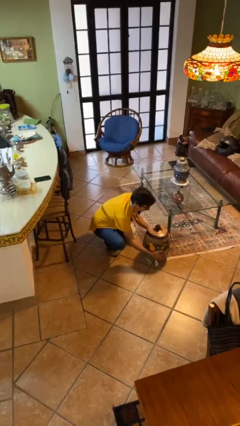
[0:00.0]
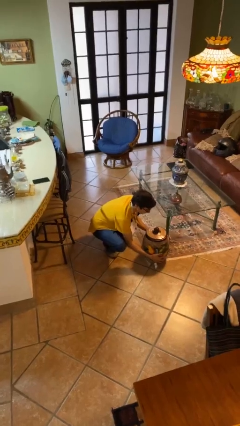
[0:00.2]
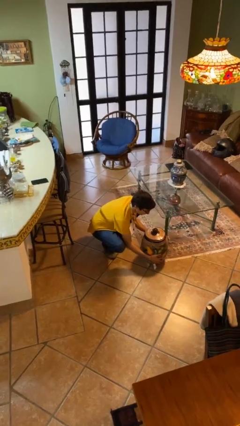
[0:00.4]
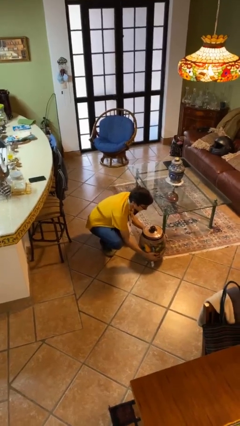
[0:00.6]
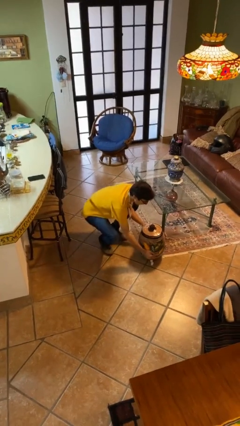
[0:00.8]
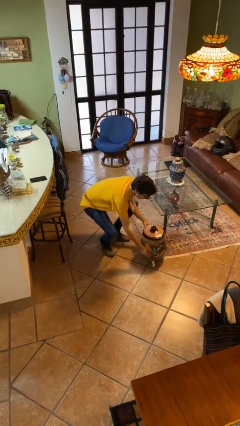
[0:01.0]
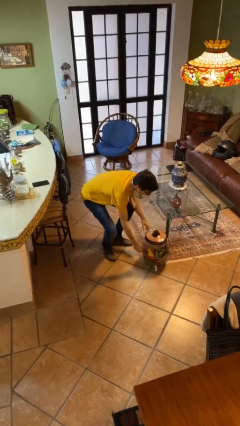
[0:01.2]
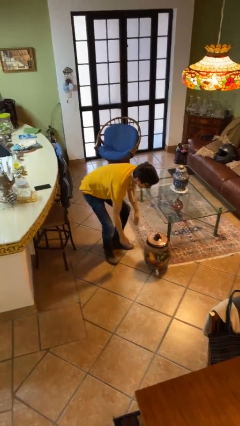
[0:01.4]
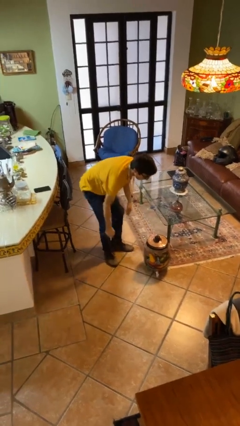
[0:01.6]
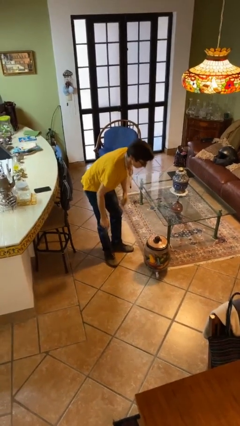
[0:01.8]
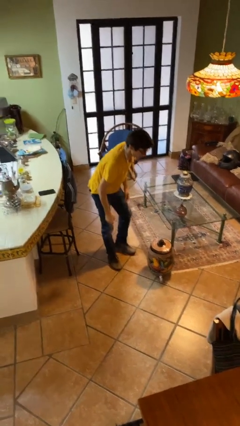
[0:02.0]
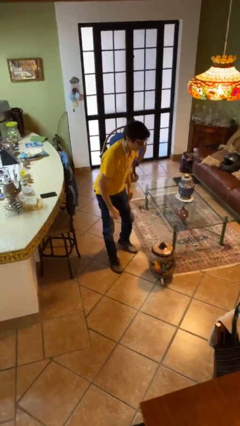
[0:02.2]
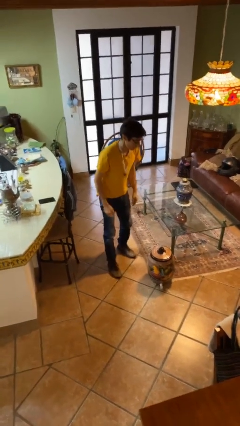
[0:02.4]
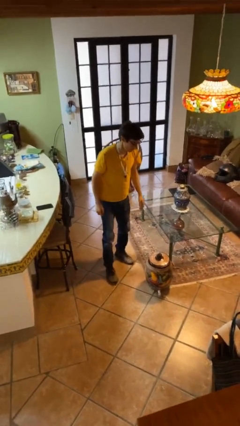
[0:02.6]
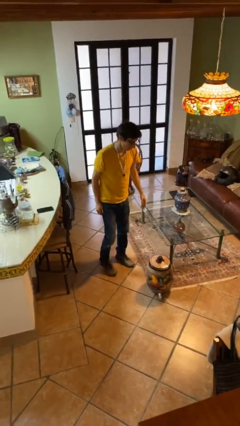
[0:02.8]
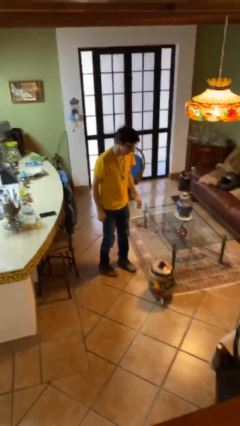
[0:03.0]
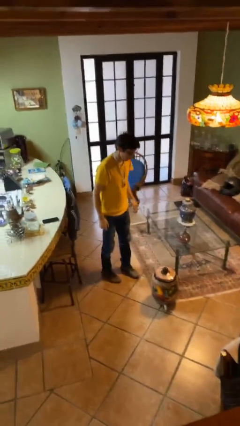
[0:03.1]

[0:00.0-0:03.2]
person puts down object on floor

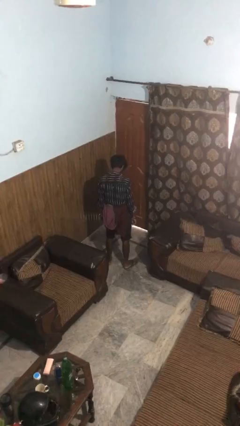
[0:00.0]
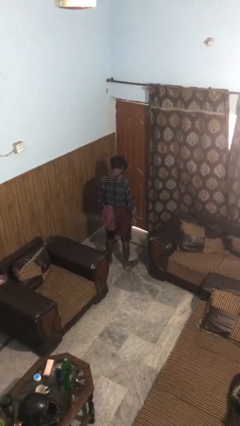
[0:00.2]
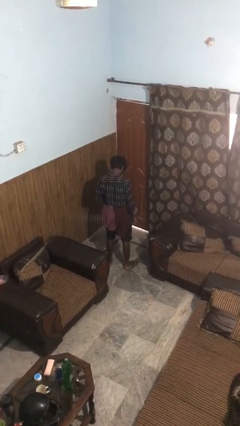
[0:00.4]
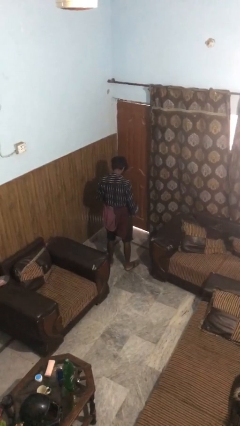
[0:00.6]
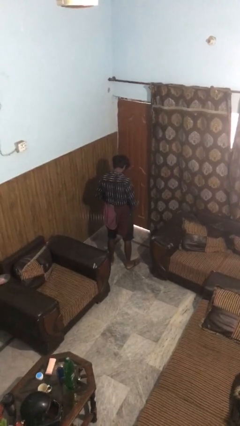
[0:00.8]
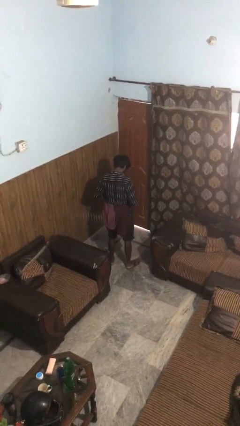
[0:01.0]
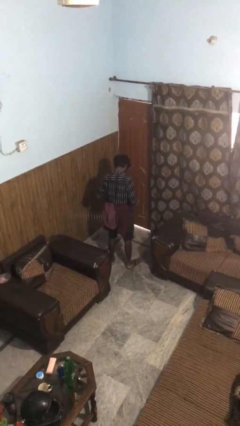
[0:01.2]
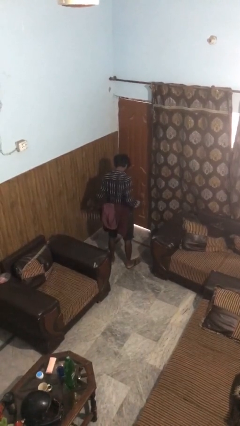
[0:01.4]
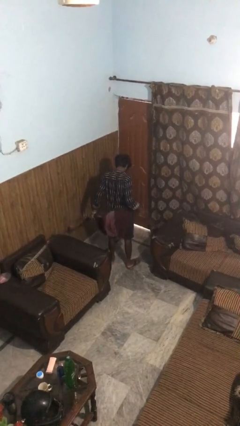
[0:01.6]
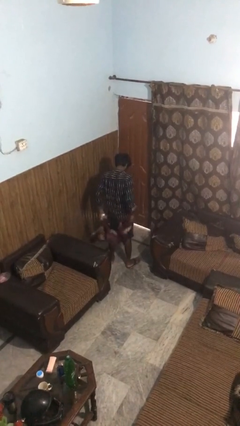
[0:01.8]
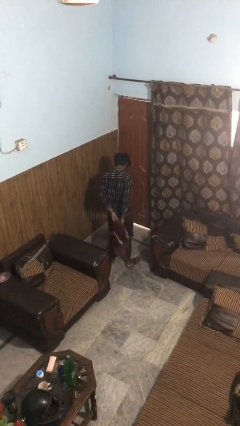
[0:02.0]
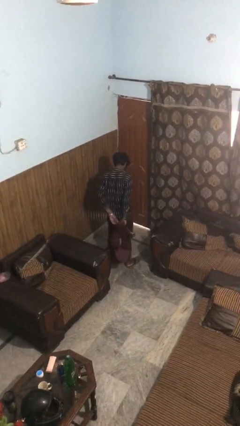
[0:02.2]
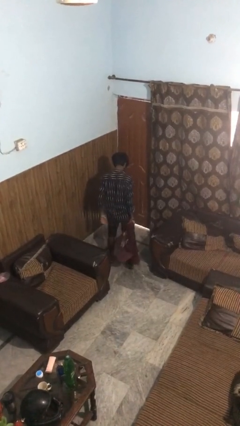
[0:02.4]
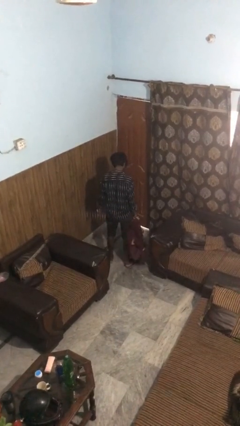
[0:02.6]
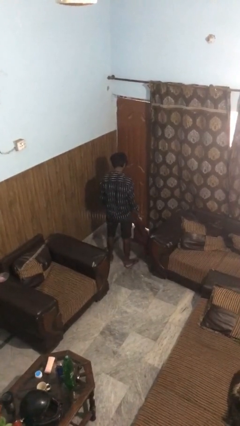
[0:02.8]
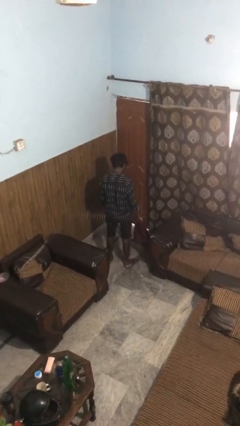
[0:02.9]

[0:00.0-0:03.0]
person unties jacket around waist

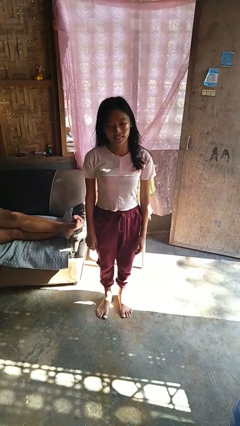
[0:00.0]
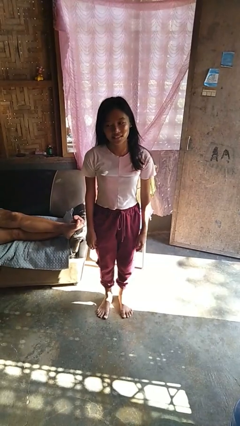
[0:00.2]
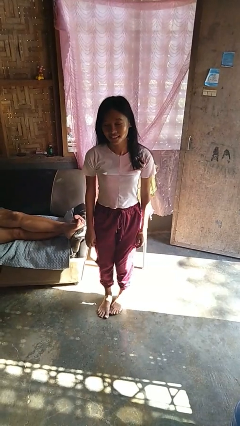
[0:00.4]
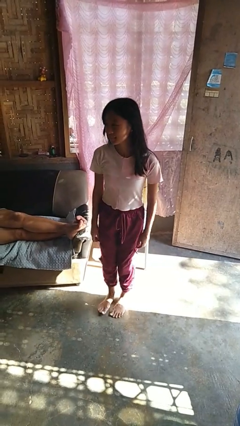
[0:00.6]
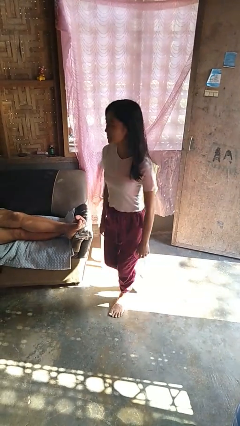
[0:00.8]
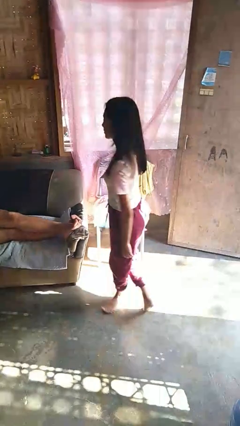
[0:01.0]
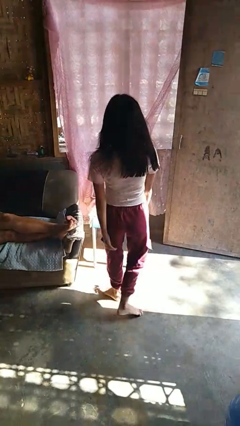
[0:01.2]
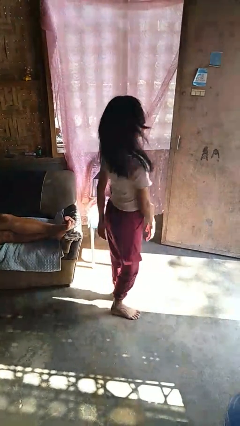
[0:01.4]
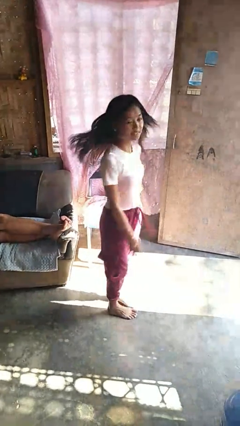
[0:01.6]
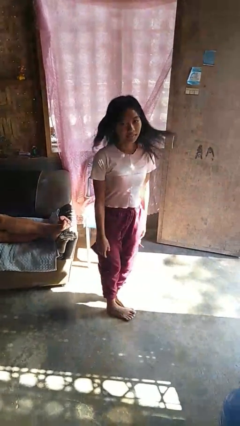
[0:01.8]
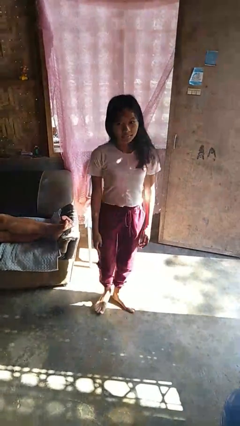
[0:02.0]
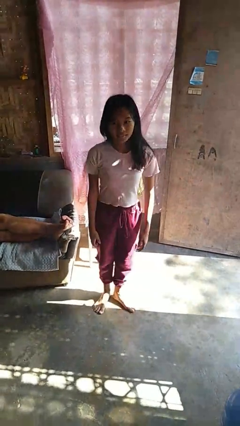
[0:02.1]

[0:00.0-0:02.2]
person twirls

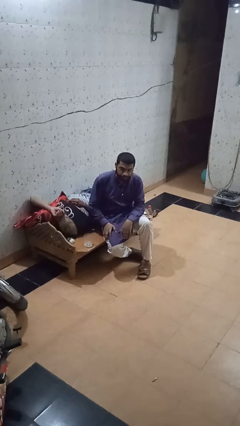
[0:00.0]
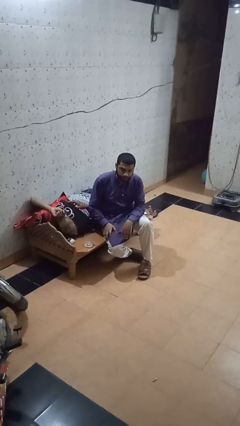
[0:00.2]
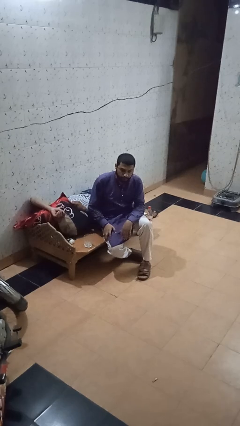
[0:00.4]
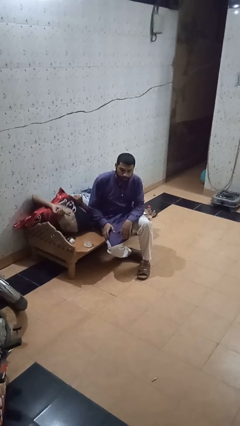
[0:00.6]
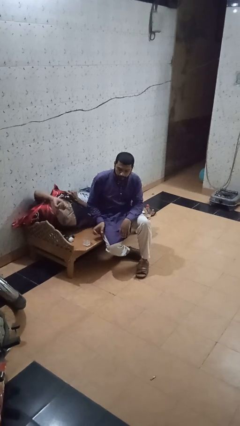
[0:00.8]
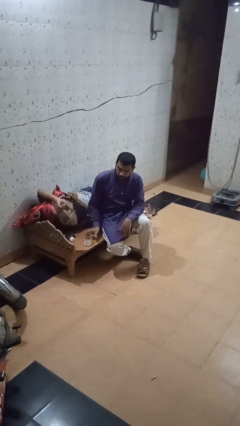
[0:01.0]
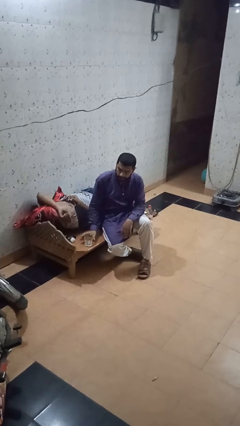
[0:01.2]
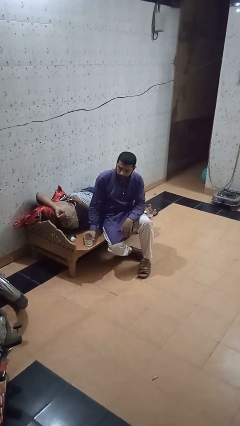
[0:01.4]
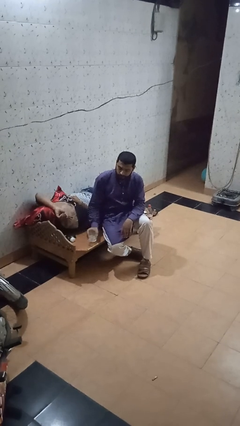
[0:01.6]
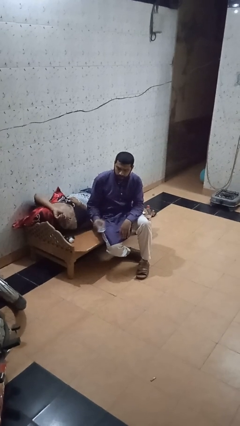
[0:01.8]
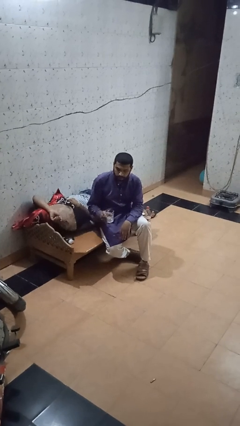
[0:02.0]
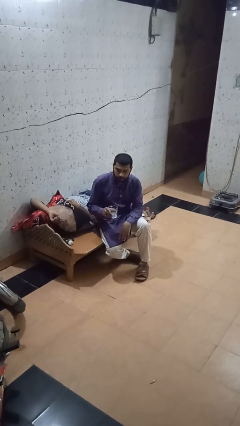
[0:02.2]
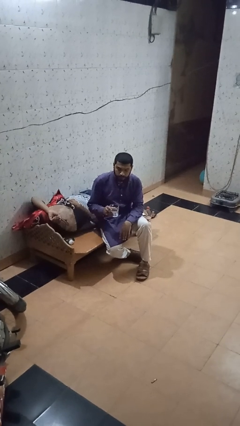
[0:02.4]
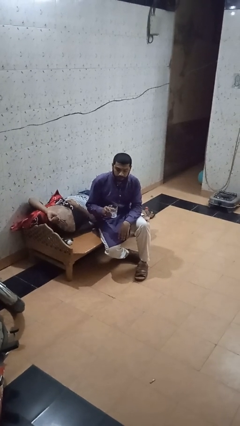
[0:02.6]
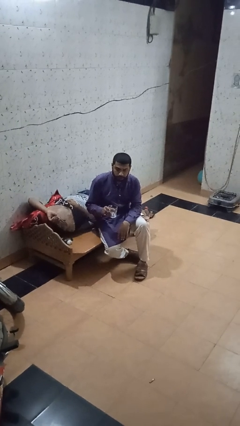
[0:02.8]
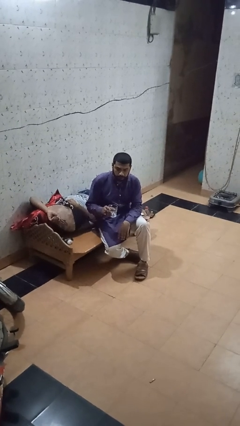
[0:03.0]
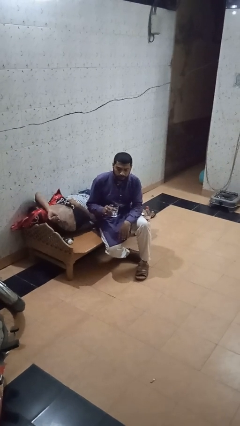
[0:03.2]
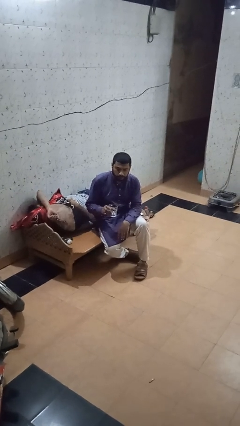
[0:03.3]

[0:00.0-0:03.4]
person picks up object from table

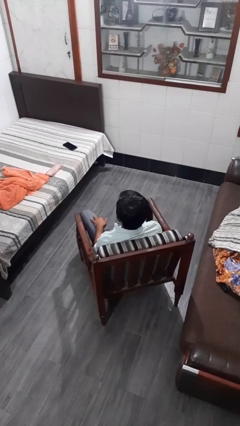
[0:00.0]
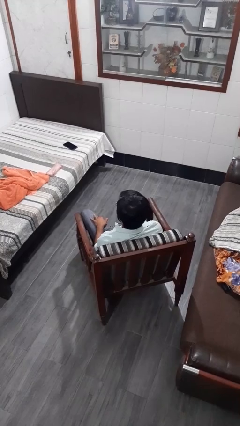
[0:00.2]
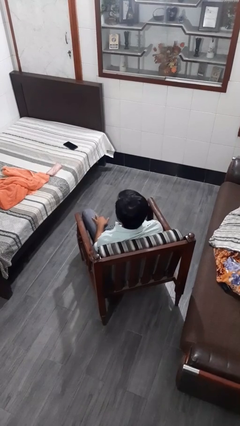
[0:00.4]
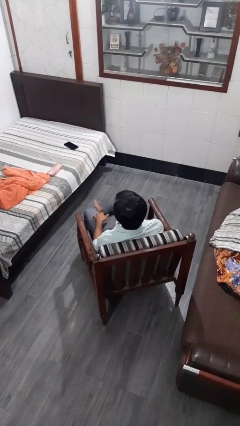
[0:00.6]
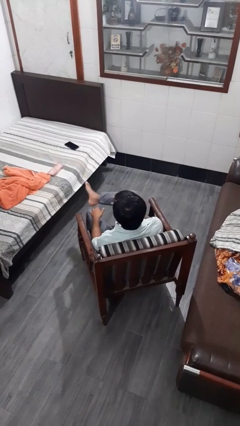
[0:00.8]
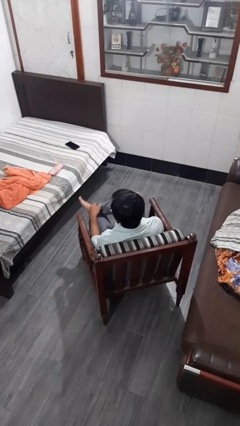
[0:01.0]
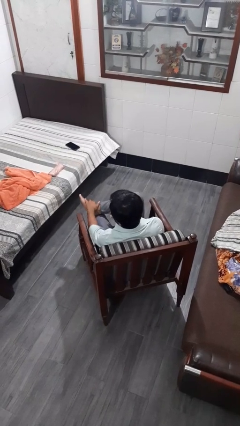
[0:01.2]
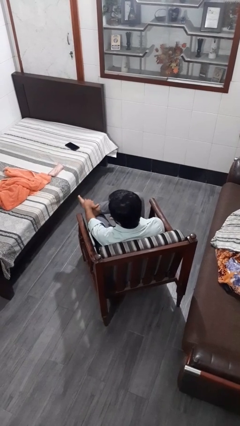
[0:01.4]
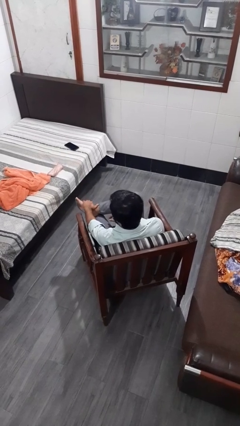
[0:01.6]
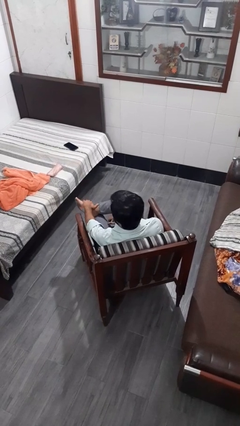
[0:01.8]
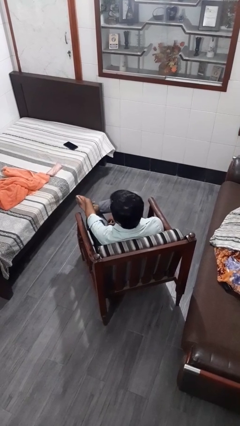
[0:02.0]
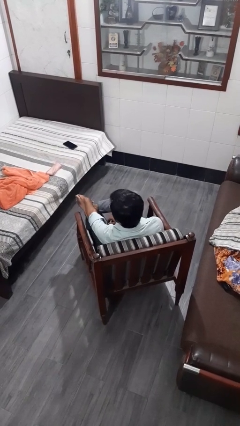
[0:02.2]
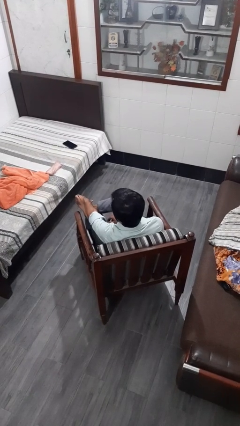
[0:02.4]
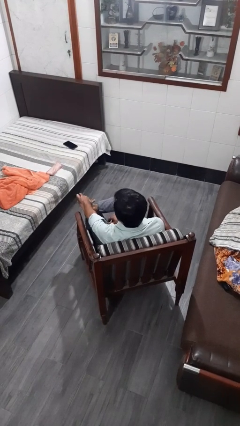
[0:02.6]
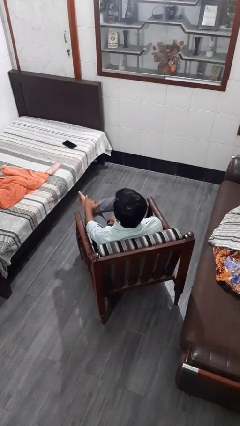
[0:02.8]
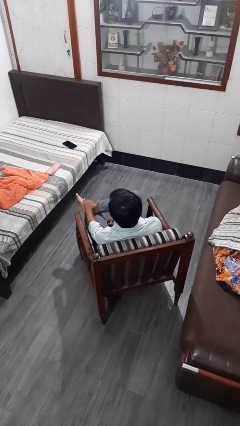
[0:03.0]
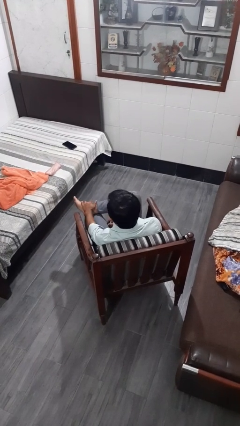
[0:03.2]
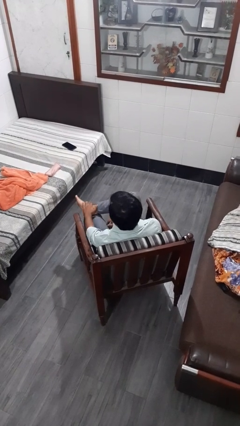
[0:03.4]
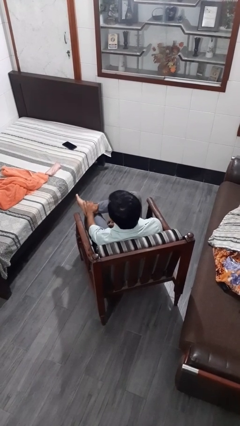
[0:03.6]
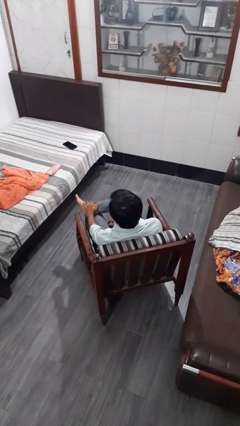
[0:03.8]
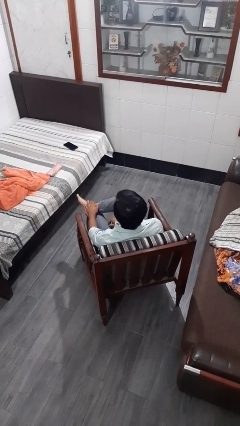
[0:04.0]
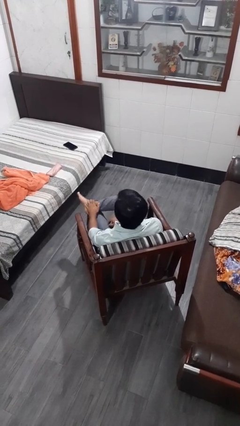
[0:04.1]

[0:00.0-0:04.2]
person rubs foot

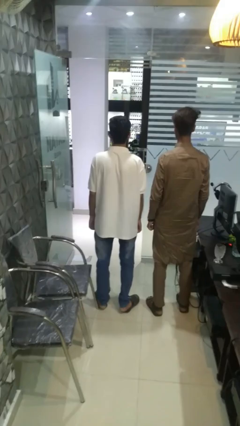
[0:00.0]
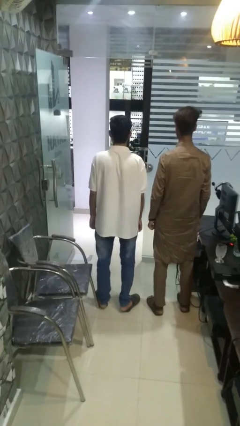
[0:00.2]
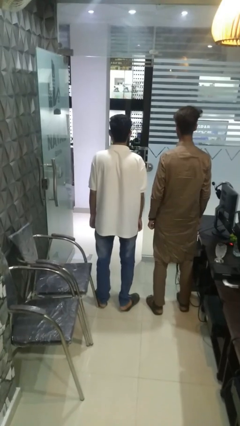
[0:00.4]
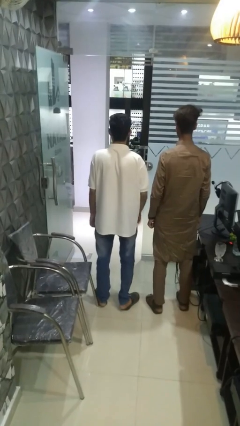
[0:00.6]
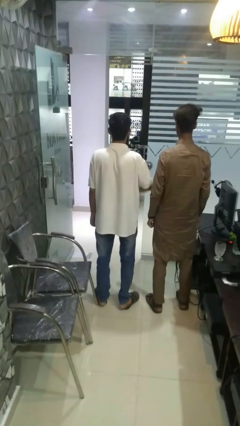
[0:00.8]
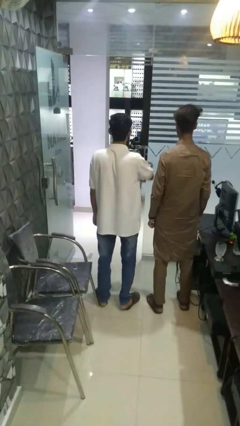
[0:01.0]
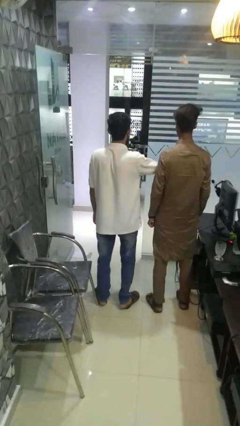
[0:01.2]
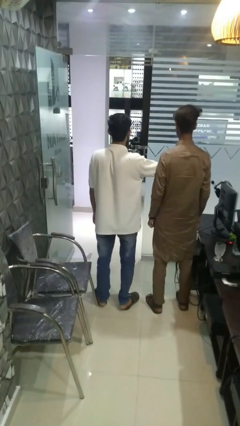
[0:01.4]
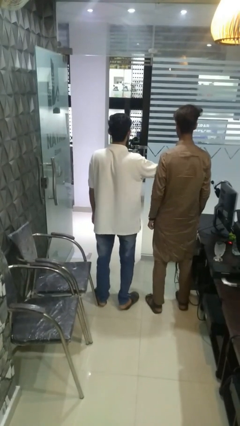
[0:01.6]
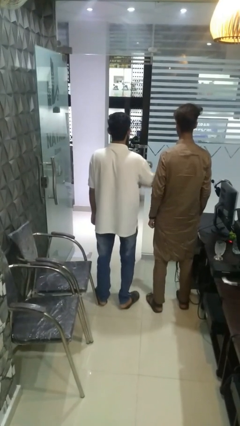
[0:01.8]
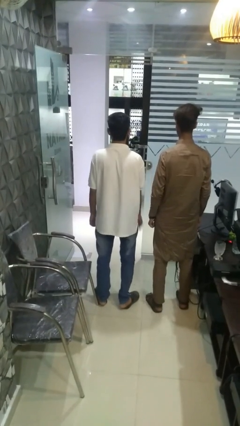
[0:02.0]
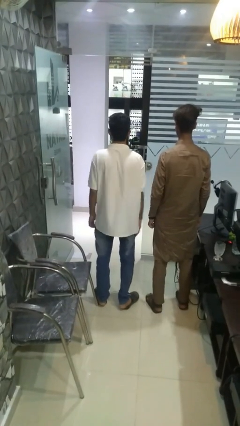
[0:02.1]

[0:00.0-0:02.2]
person nudges person with elbow
